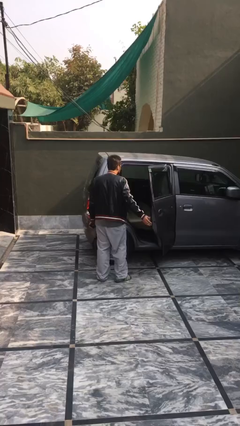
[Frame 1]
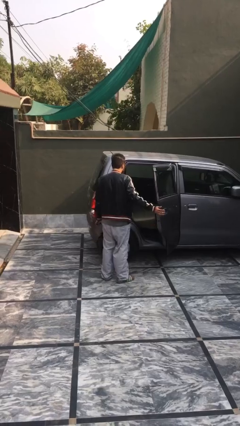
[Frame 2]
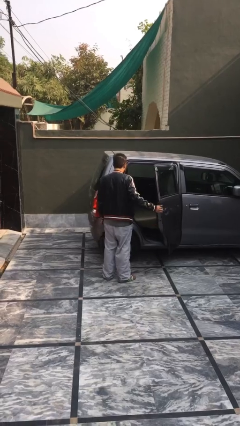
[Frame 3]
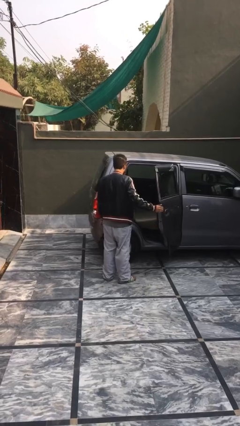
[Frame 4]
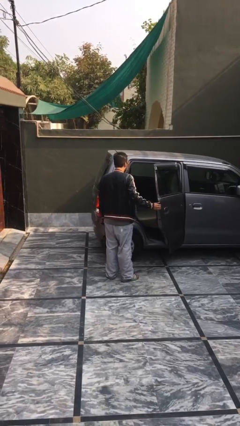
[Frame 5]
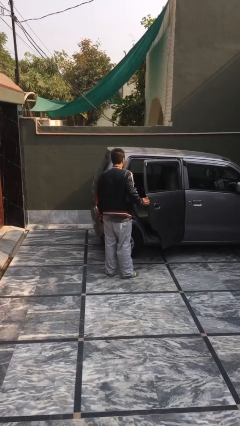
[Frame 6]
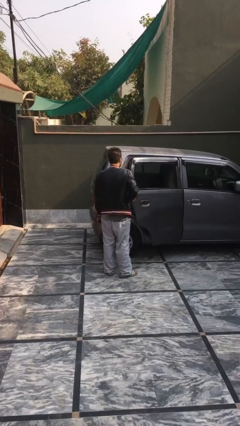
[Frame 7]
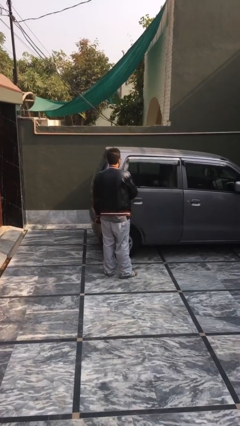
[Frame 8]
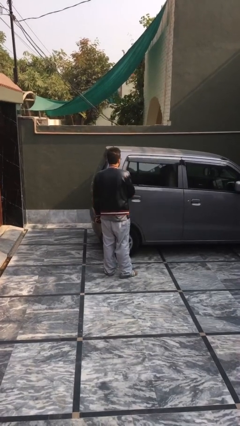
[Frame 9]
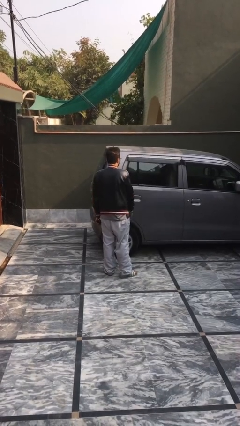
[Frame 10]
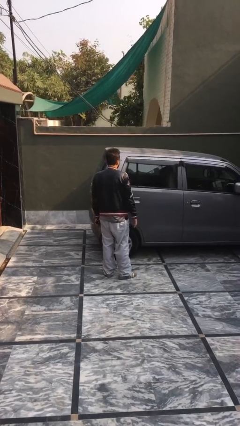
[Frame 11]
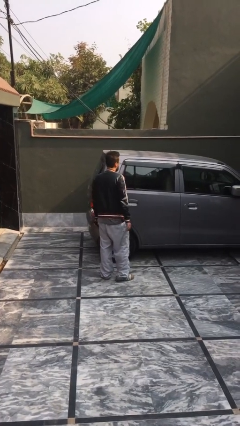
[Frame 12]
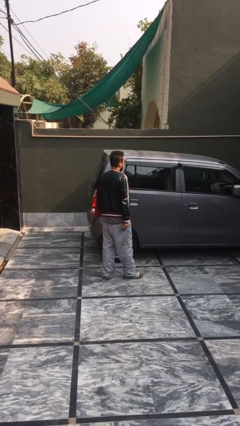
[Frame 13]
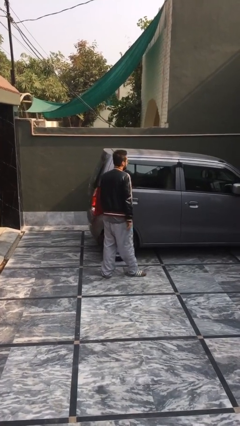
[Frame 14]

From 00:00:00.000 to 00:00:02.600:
person closes car door

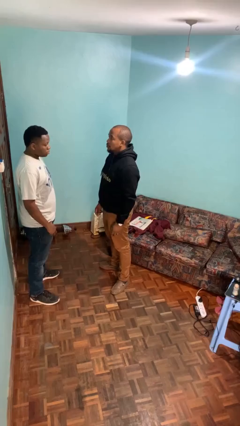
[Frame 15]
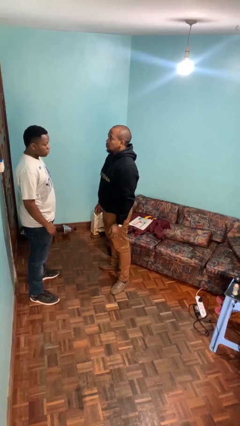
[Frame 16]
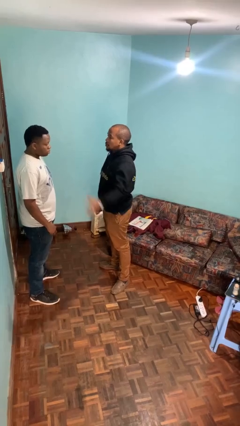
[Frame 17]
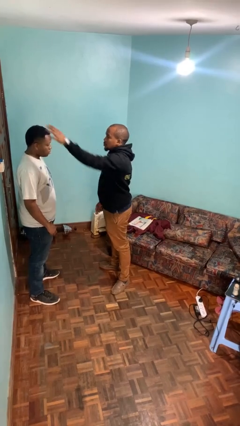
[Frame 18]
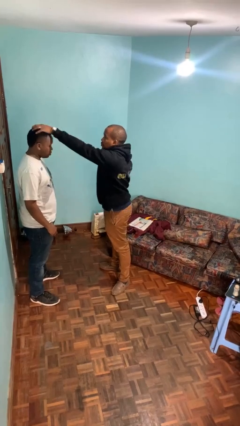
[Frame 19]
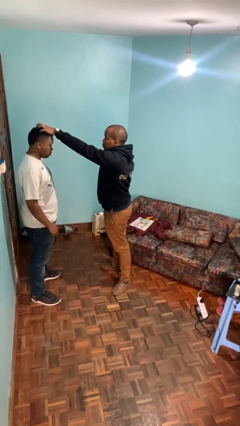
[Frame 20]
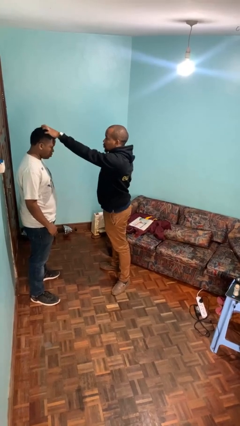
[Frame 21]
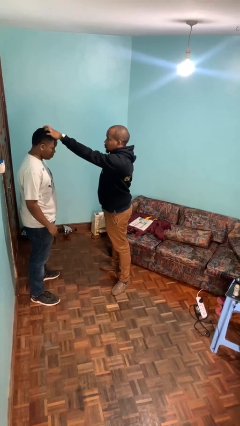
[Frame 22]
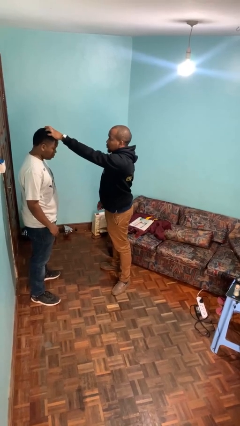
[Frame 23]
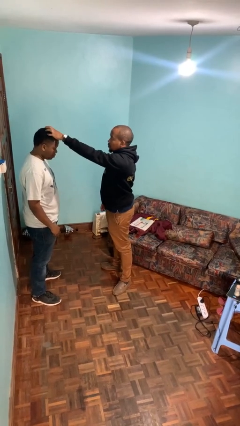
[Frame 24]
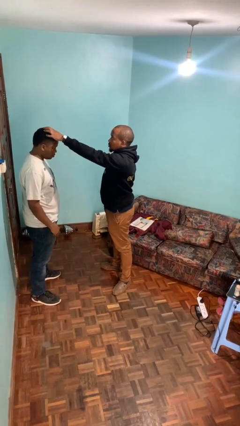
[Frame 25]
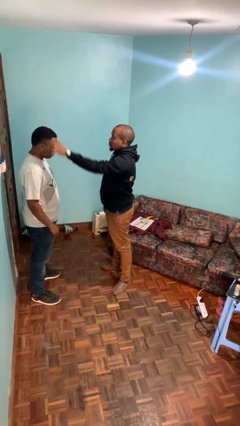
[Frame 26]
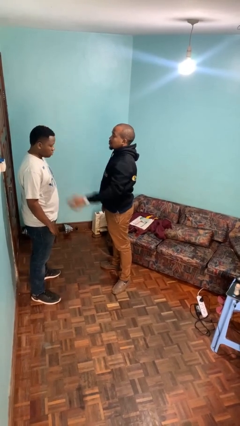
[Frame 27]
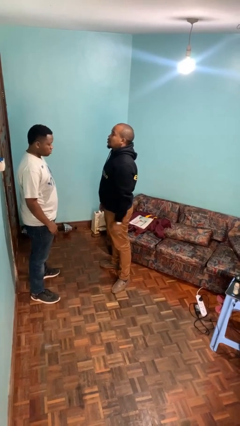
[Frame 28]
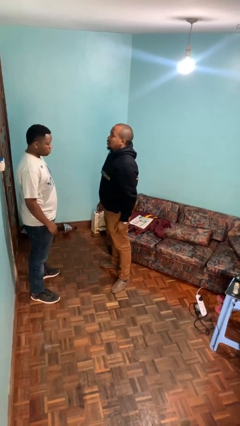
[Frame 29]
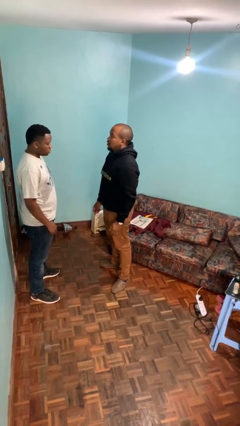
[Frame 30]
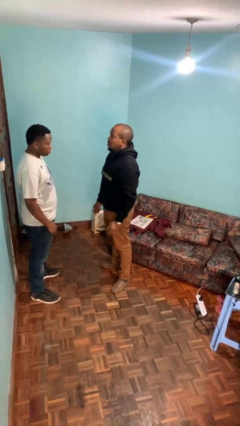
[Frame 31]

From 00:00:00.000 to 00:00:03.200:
person grabs person by hair

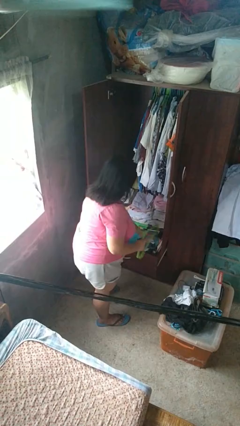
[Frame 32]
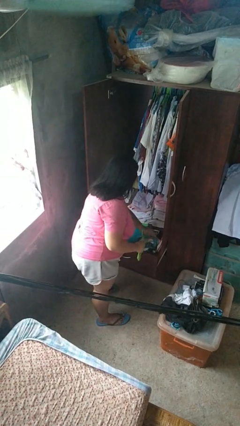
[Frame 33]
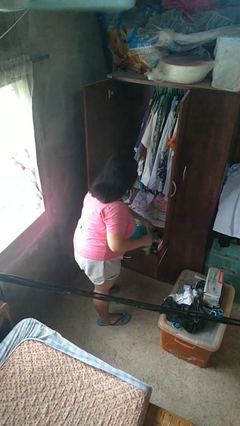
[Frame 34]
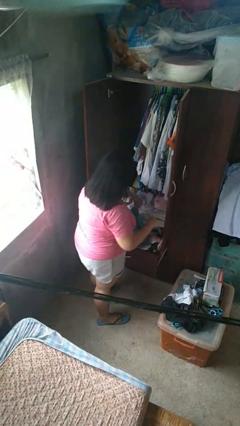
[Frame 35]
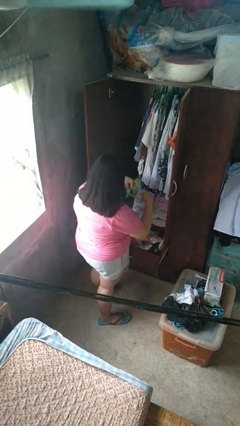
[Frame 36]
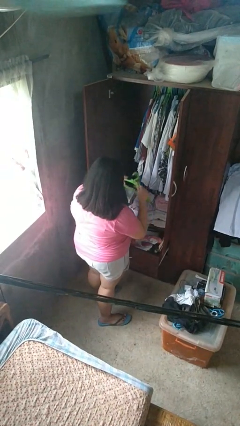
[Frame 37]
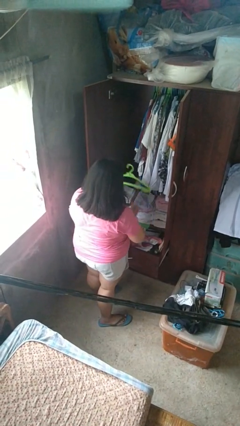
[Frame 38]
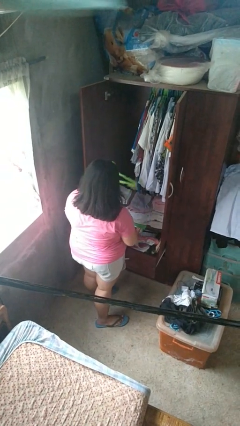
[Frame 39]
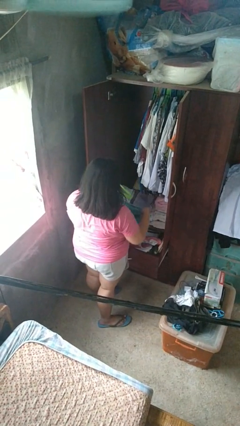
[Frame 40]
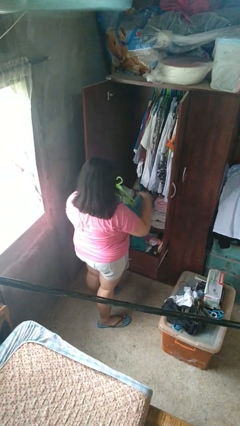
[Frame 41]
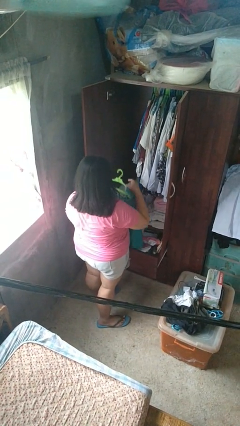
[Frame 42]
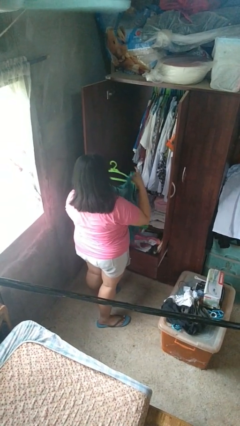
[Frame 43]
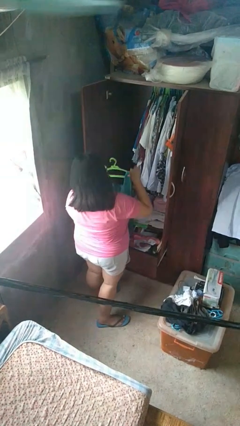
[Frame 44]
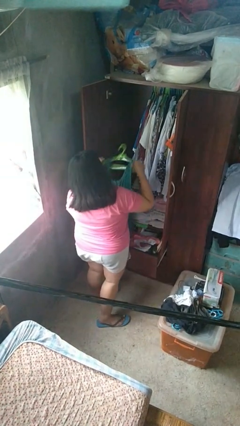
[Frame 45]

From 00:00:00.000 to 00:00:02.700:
person puts clothes into closet

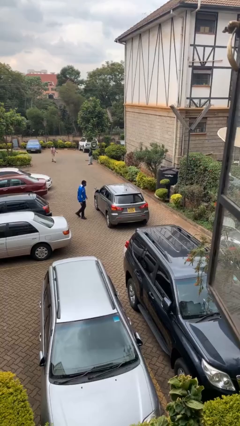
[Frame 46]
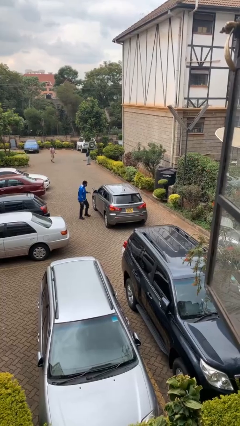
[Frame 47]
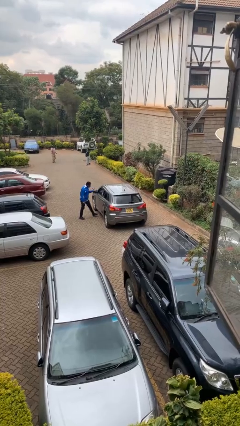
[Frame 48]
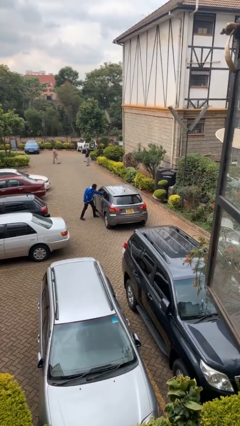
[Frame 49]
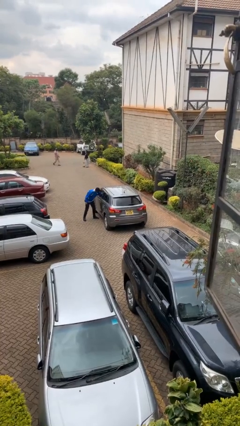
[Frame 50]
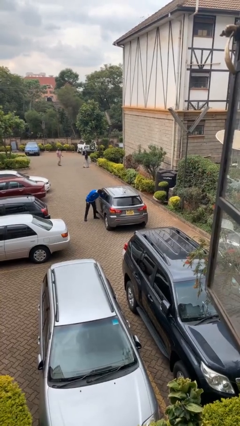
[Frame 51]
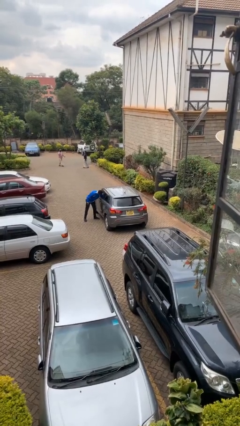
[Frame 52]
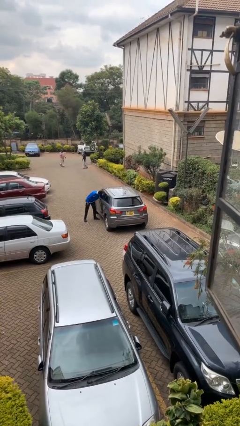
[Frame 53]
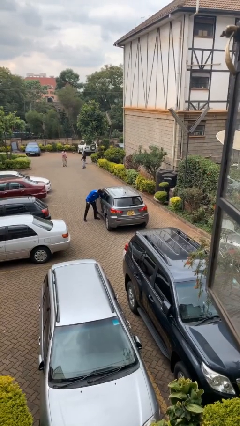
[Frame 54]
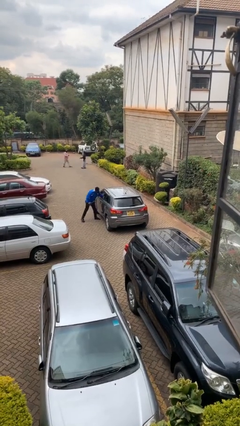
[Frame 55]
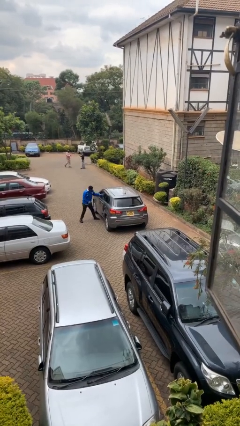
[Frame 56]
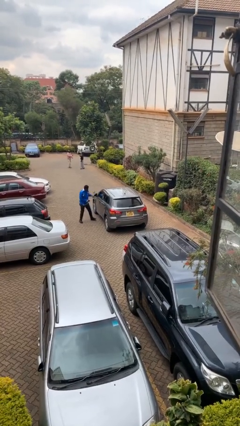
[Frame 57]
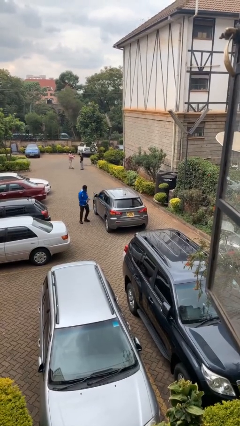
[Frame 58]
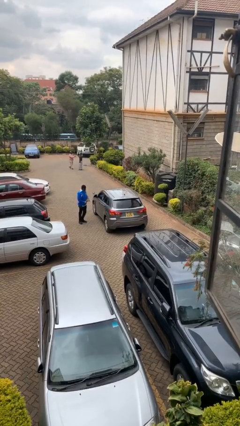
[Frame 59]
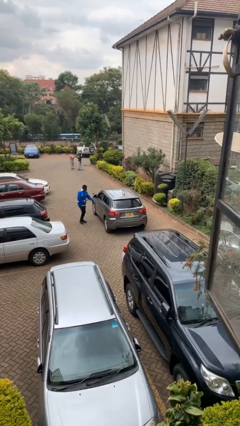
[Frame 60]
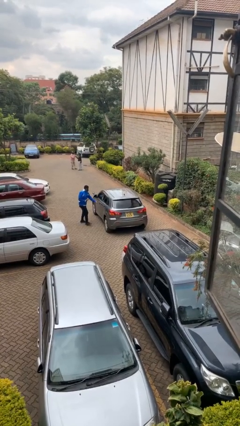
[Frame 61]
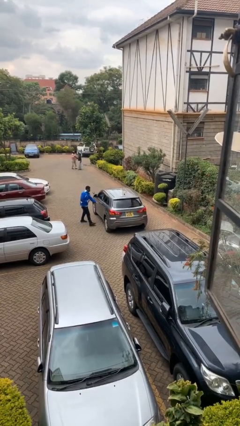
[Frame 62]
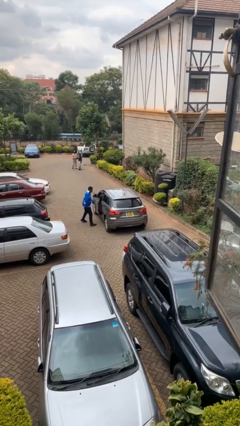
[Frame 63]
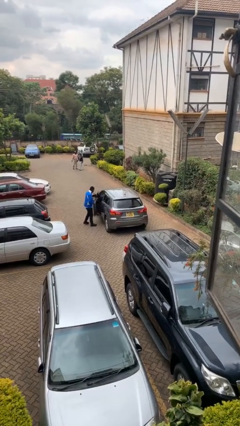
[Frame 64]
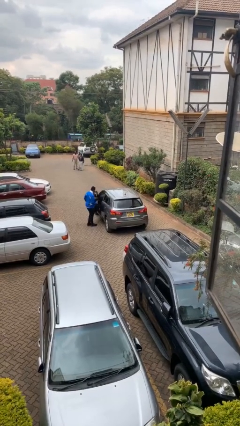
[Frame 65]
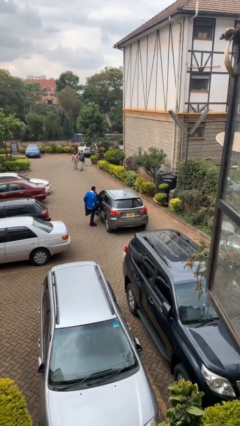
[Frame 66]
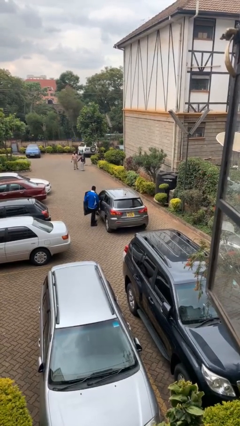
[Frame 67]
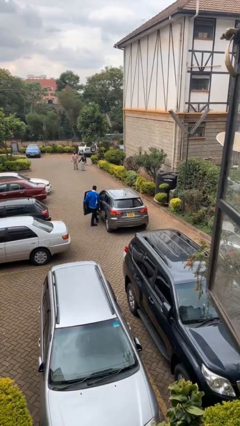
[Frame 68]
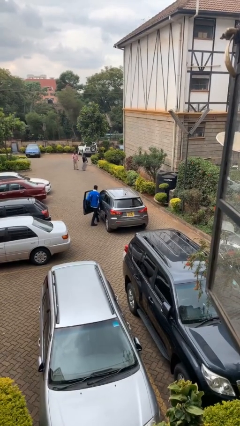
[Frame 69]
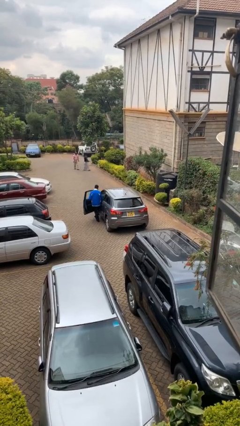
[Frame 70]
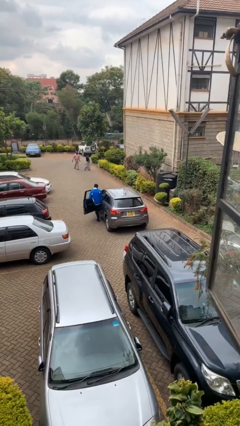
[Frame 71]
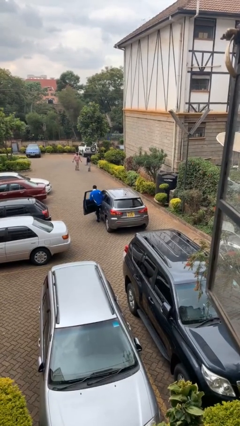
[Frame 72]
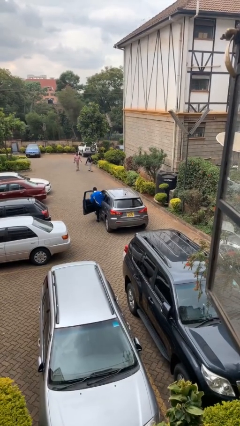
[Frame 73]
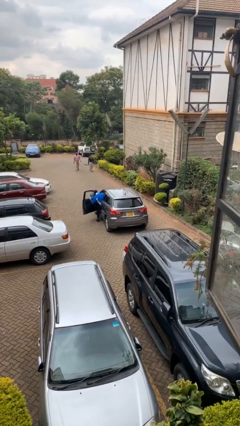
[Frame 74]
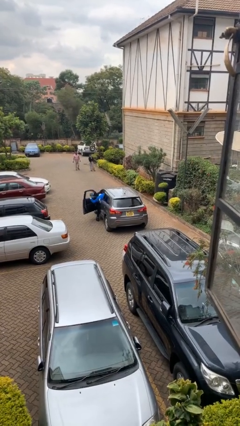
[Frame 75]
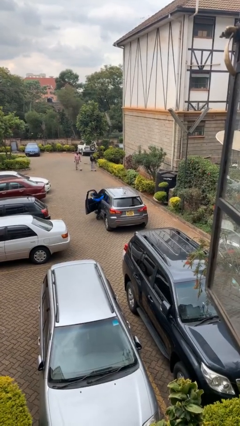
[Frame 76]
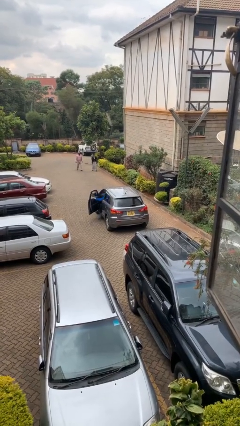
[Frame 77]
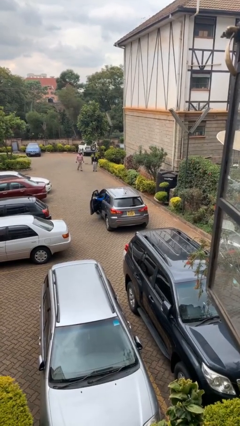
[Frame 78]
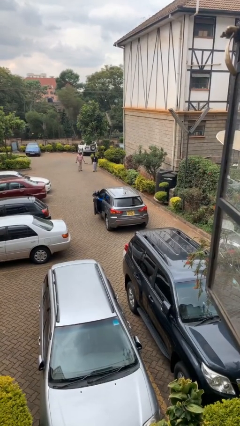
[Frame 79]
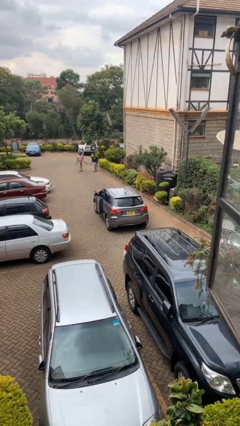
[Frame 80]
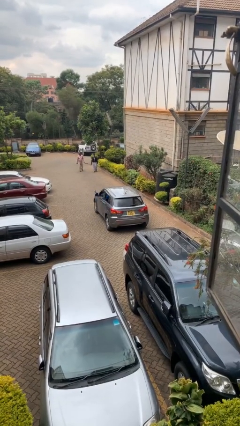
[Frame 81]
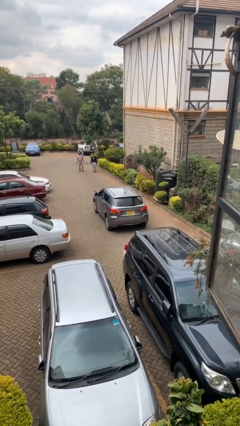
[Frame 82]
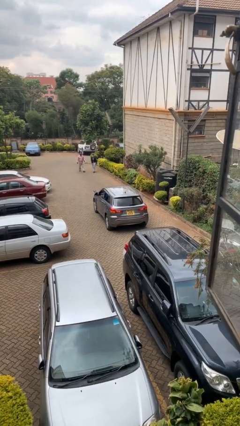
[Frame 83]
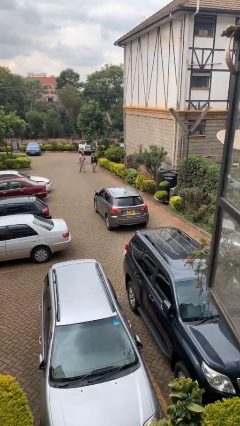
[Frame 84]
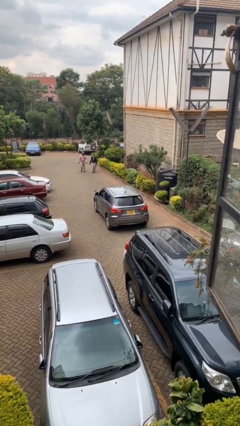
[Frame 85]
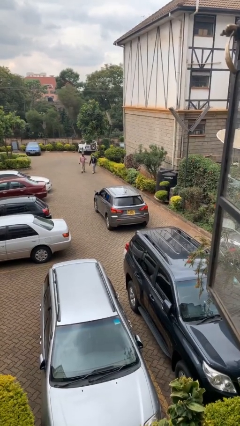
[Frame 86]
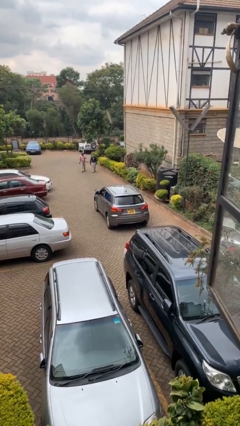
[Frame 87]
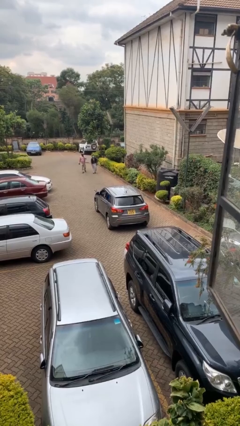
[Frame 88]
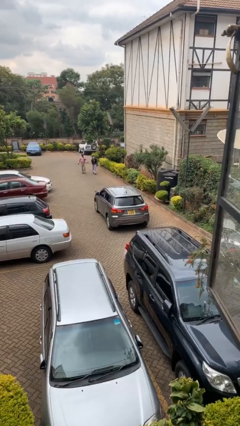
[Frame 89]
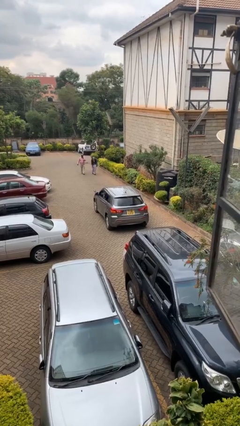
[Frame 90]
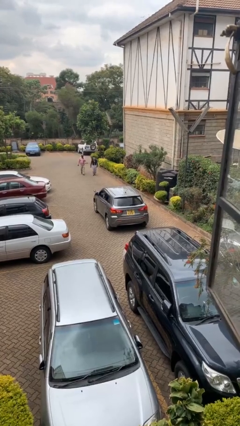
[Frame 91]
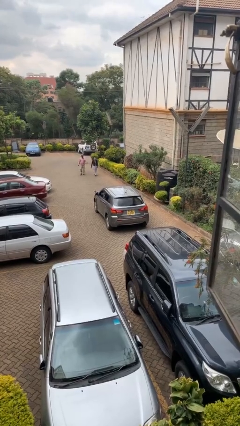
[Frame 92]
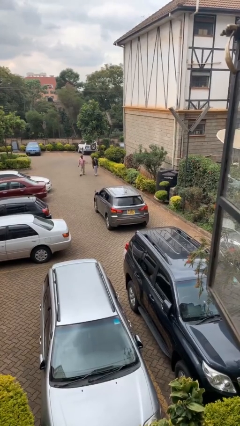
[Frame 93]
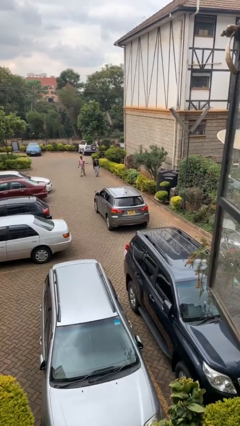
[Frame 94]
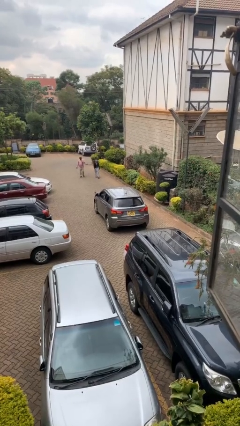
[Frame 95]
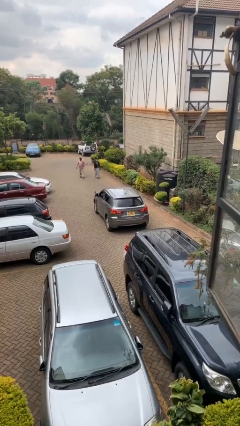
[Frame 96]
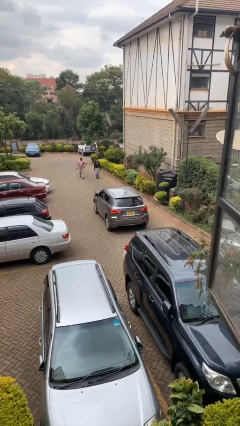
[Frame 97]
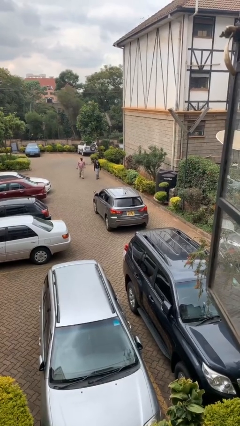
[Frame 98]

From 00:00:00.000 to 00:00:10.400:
car picks up person
